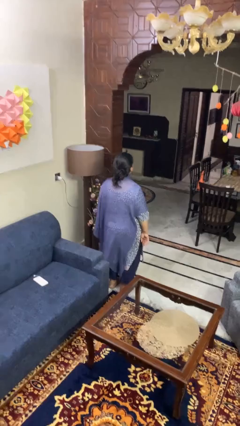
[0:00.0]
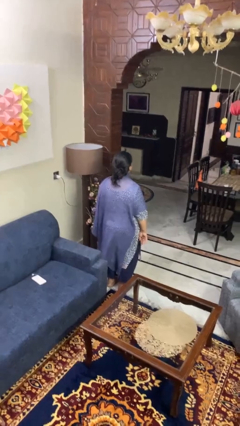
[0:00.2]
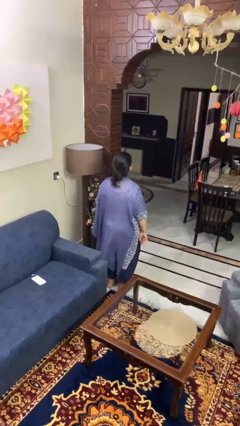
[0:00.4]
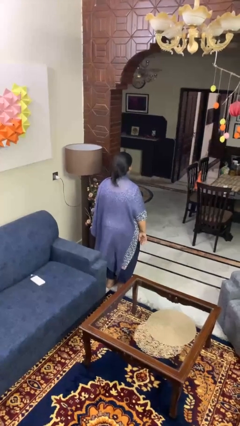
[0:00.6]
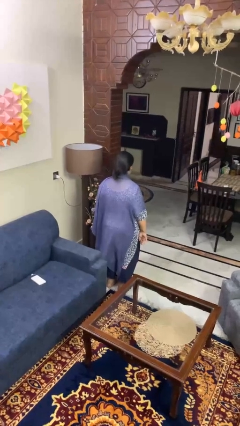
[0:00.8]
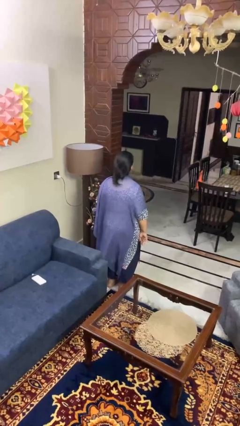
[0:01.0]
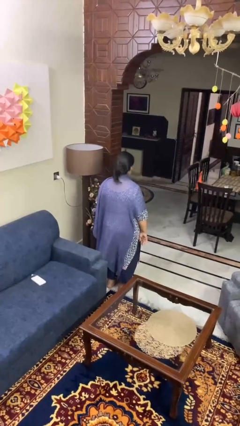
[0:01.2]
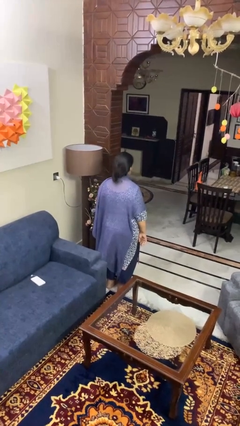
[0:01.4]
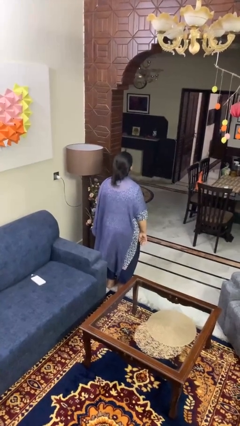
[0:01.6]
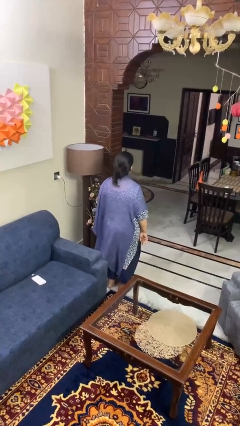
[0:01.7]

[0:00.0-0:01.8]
person nods head

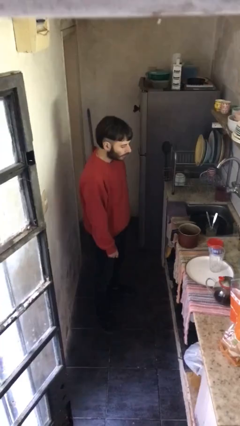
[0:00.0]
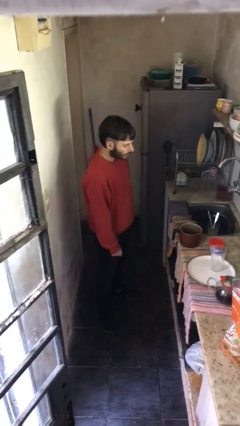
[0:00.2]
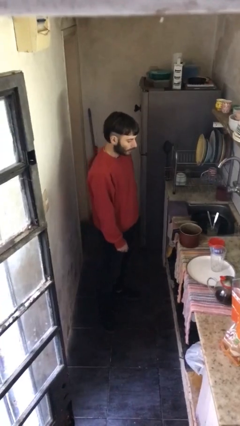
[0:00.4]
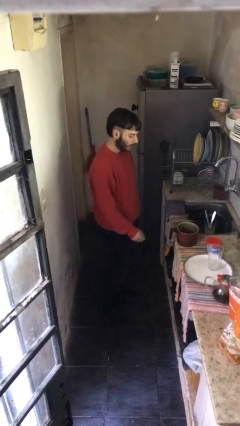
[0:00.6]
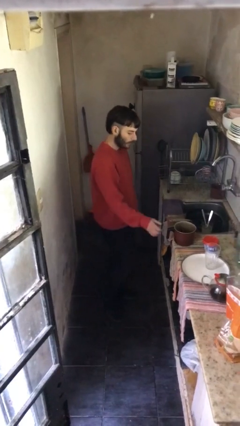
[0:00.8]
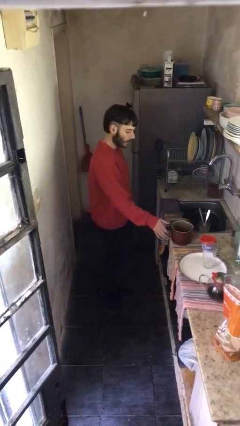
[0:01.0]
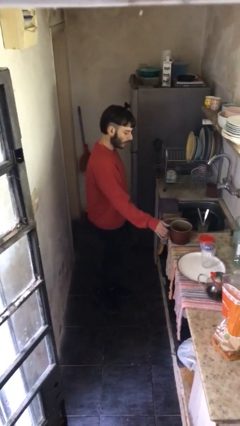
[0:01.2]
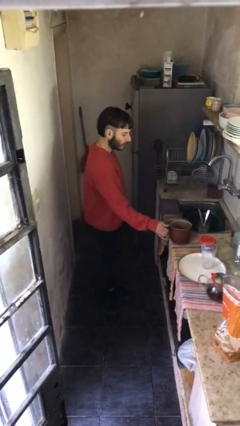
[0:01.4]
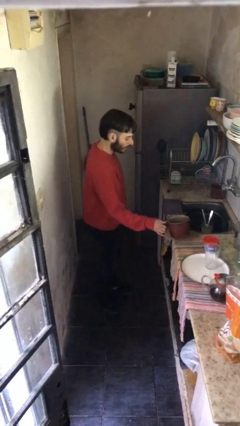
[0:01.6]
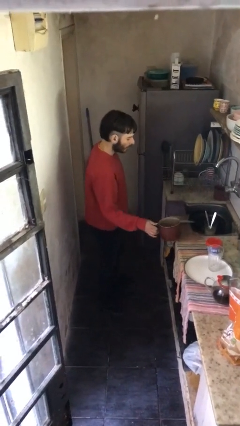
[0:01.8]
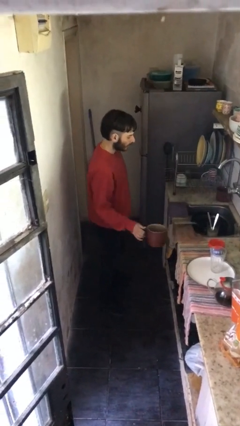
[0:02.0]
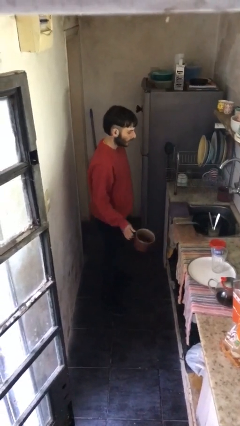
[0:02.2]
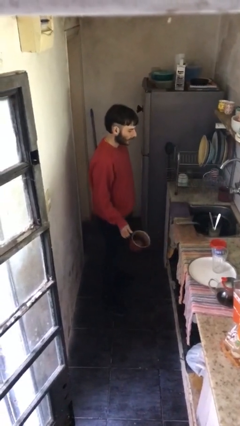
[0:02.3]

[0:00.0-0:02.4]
person picks up object from countertop

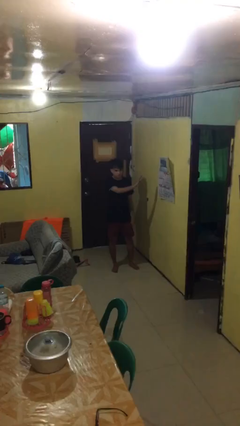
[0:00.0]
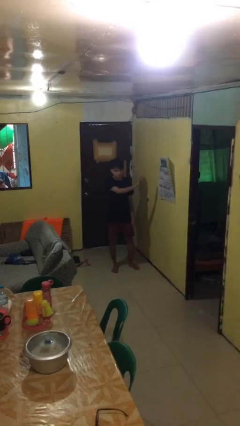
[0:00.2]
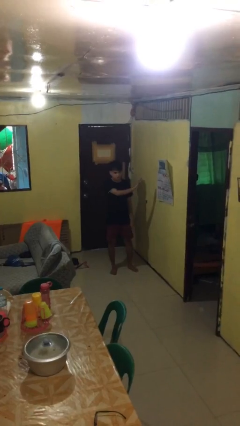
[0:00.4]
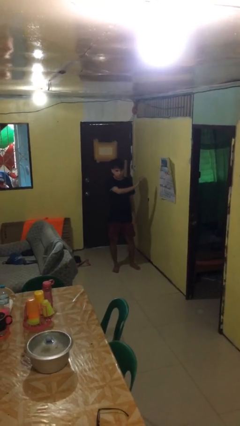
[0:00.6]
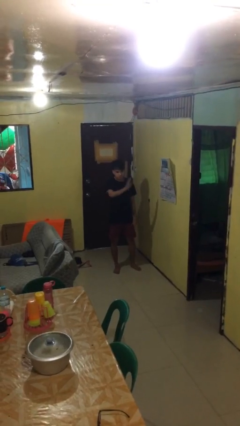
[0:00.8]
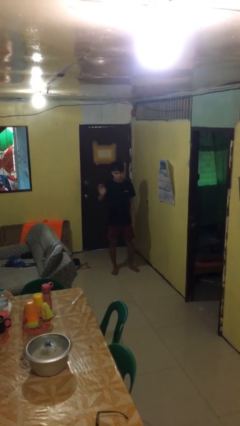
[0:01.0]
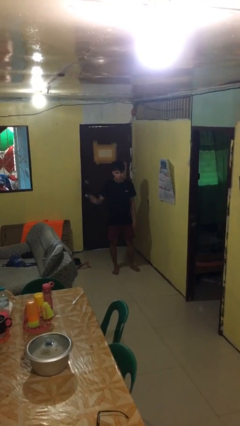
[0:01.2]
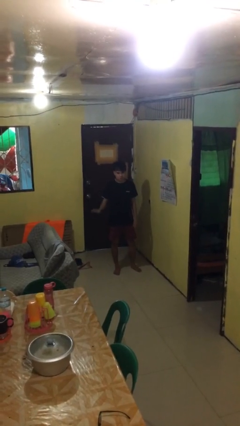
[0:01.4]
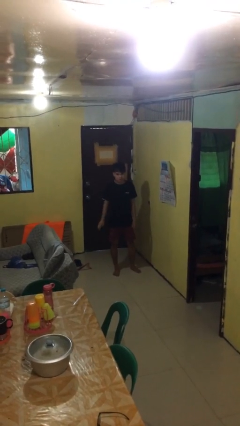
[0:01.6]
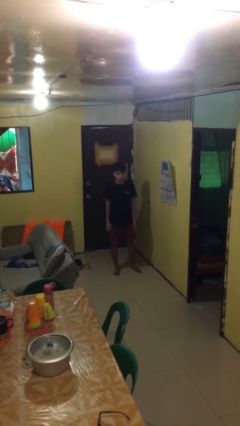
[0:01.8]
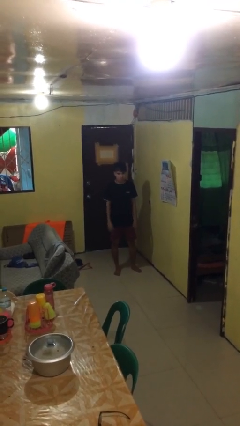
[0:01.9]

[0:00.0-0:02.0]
person gestures swipe right

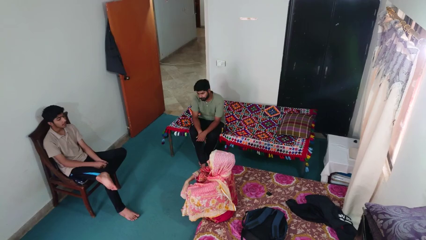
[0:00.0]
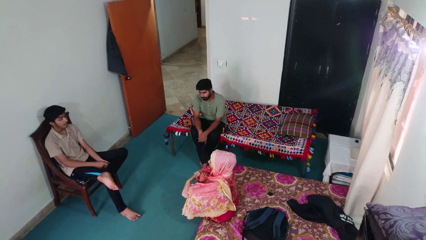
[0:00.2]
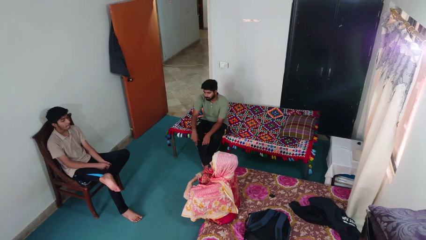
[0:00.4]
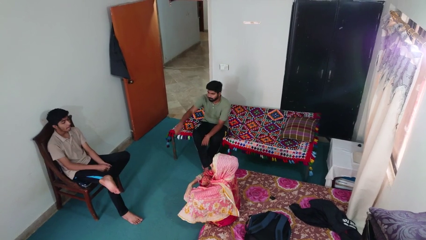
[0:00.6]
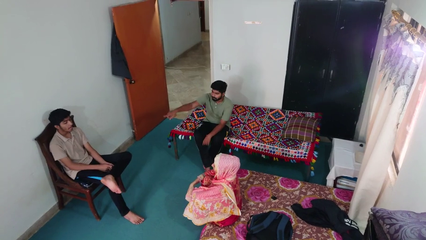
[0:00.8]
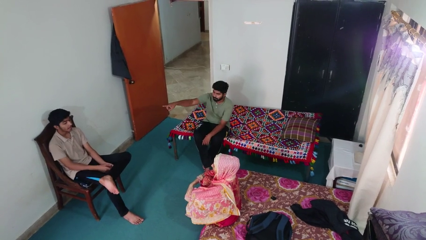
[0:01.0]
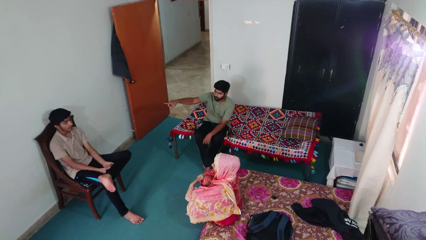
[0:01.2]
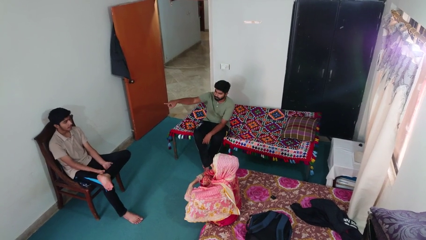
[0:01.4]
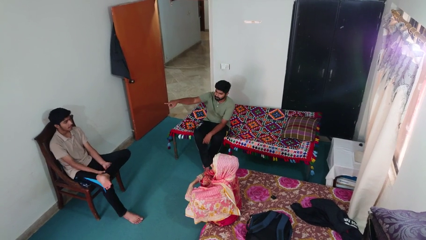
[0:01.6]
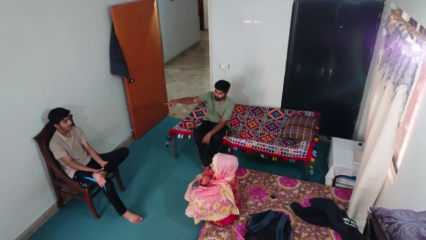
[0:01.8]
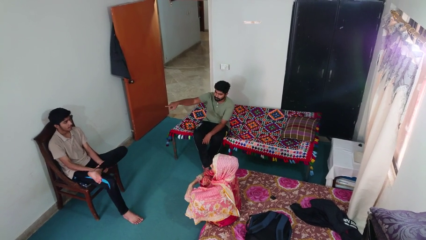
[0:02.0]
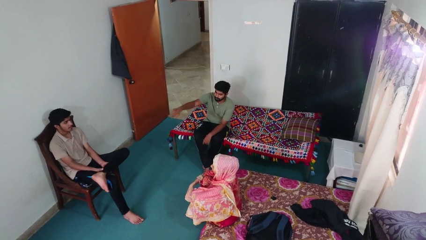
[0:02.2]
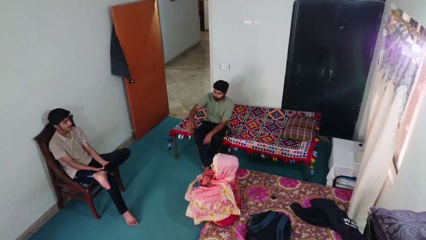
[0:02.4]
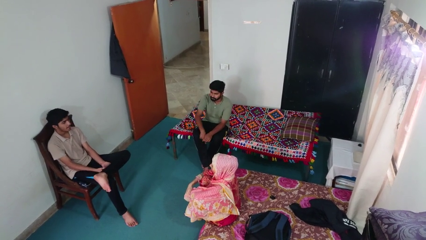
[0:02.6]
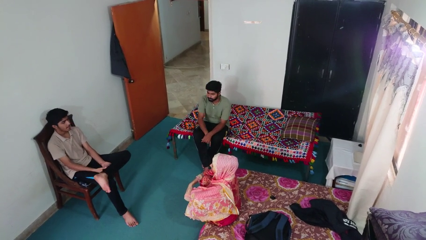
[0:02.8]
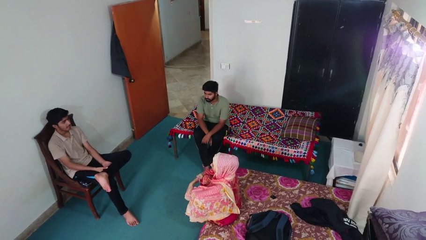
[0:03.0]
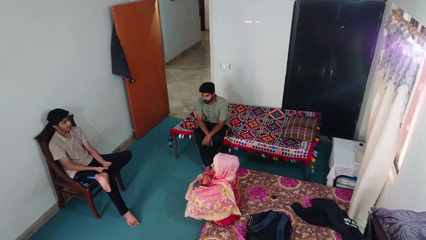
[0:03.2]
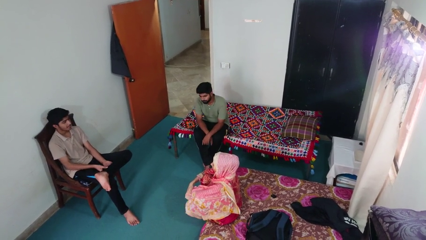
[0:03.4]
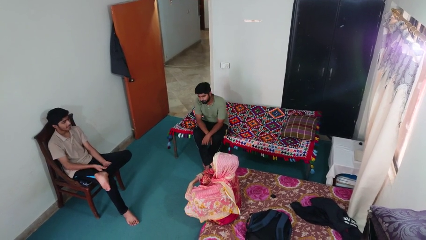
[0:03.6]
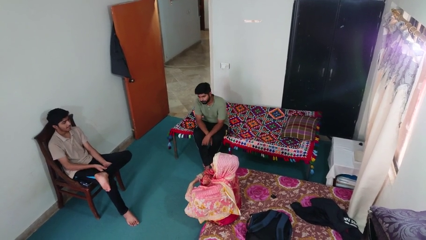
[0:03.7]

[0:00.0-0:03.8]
person points at person

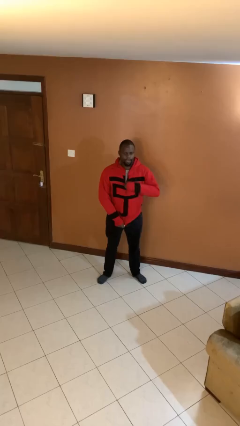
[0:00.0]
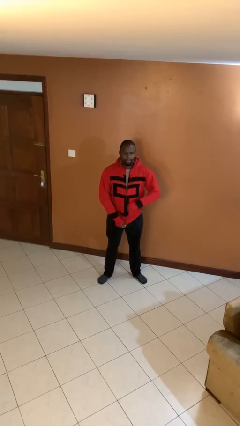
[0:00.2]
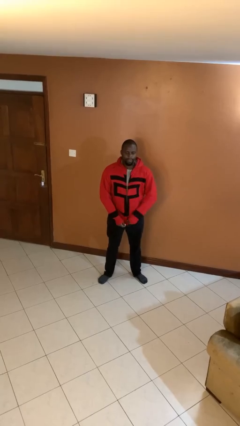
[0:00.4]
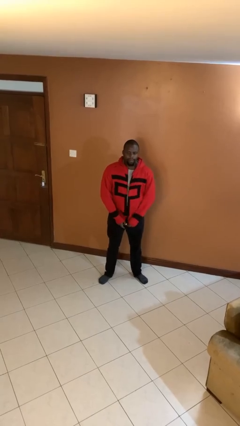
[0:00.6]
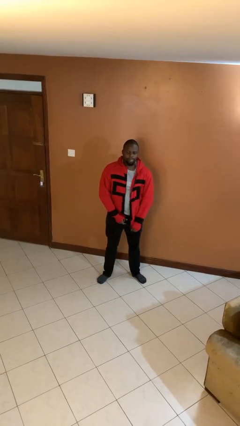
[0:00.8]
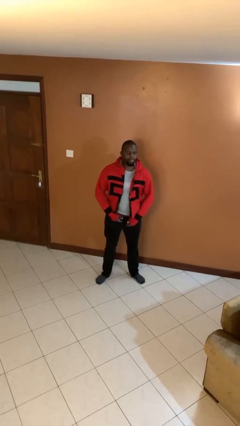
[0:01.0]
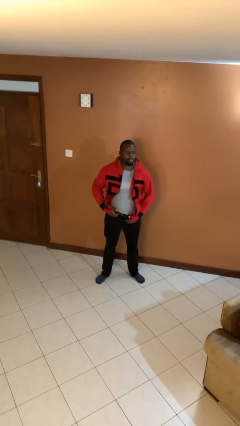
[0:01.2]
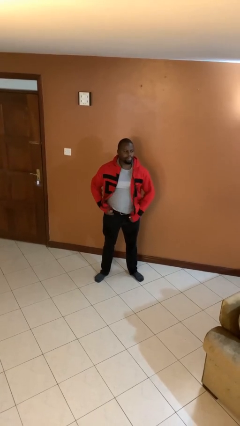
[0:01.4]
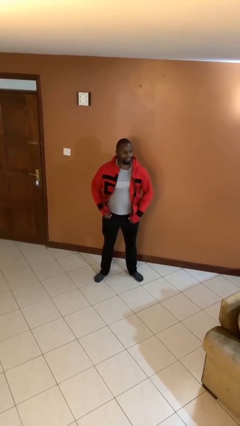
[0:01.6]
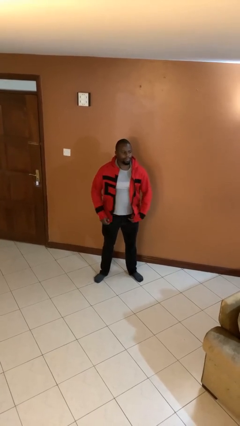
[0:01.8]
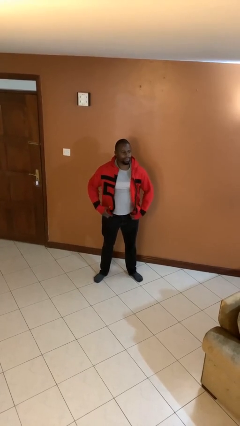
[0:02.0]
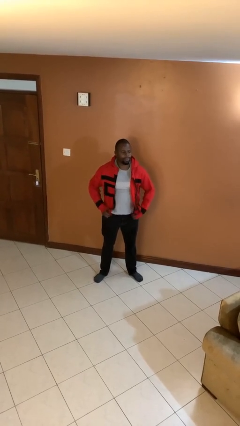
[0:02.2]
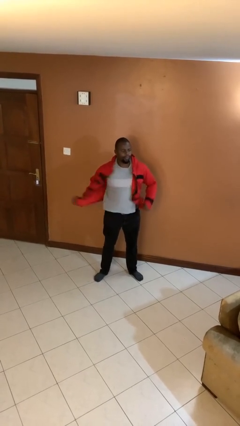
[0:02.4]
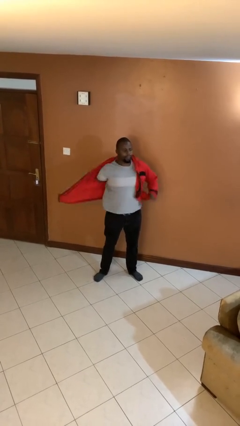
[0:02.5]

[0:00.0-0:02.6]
person unzips jacket

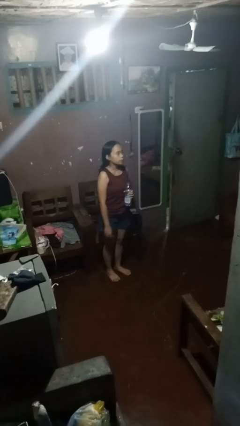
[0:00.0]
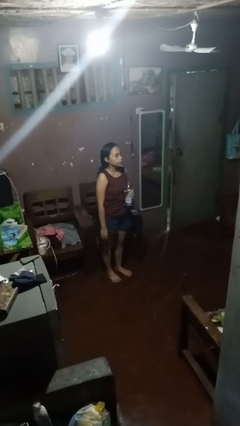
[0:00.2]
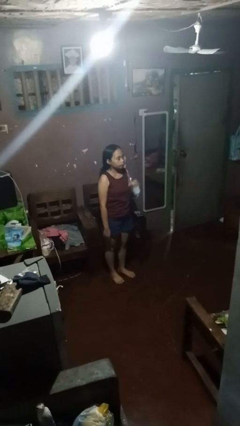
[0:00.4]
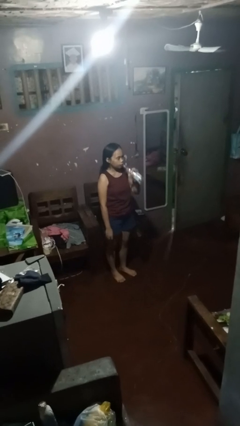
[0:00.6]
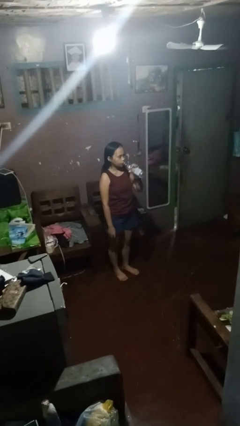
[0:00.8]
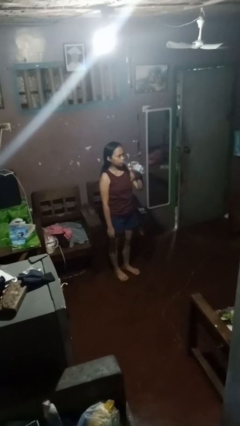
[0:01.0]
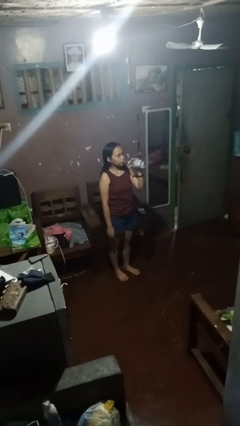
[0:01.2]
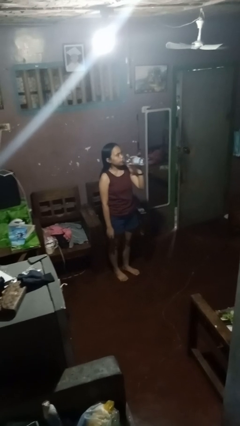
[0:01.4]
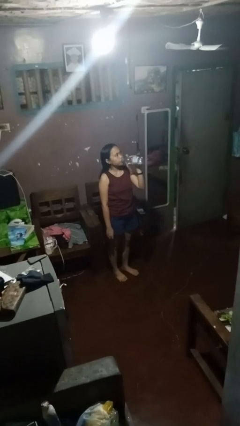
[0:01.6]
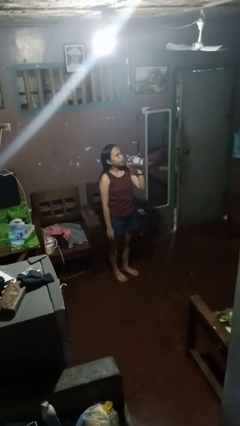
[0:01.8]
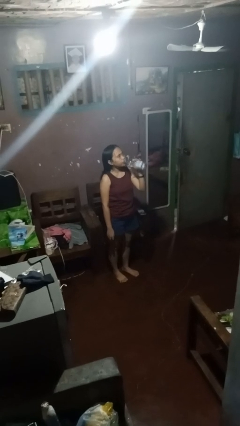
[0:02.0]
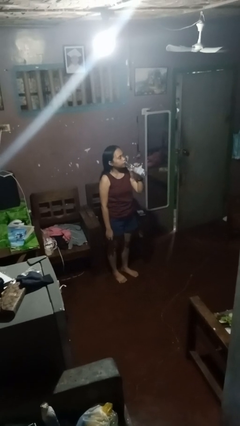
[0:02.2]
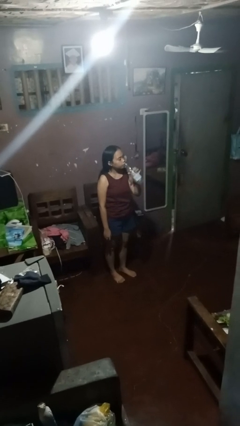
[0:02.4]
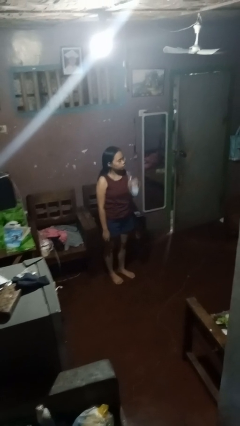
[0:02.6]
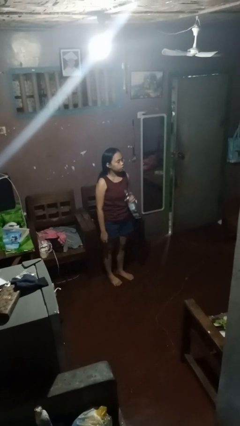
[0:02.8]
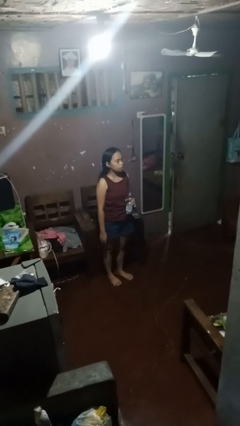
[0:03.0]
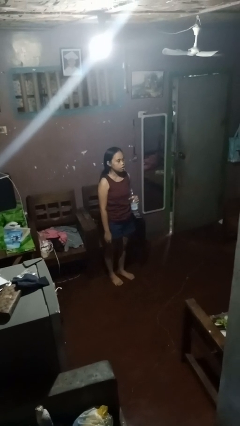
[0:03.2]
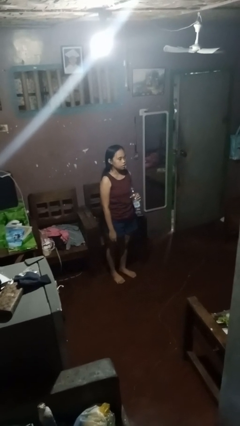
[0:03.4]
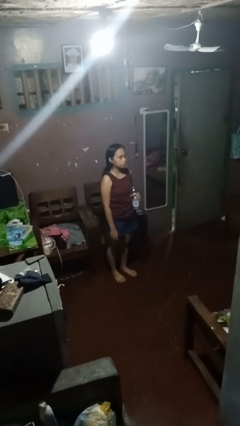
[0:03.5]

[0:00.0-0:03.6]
person drinks from bottle

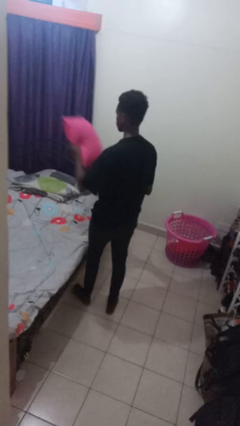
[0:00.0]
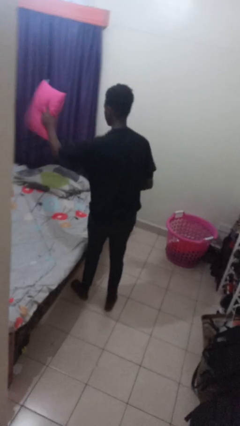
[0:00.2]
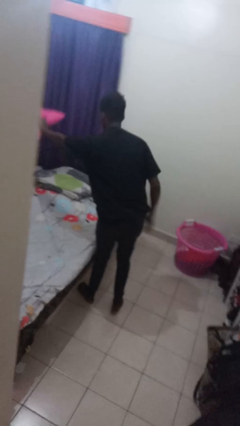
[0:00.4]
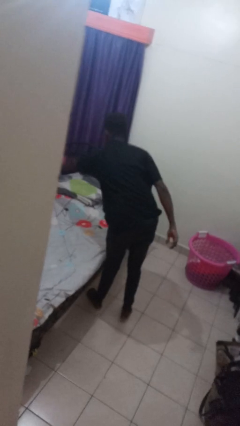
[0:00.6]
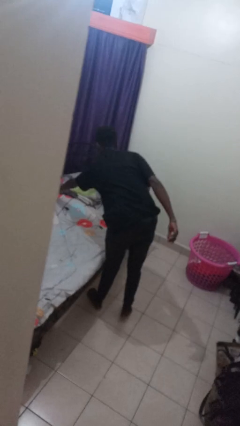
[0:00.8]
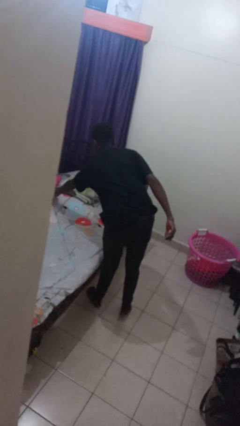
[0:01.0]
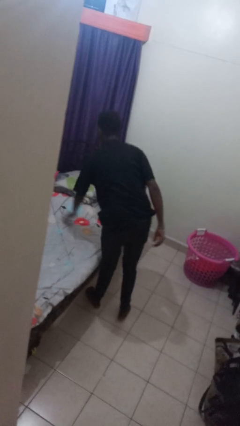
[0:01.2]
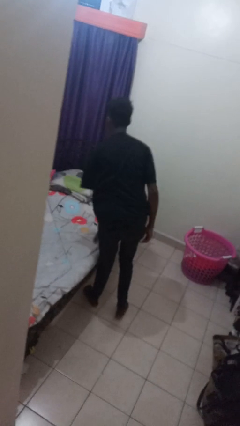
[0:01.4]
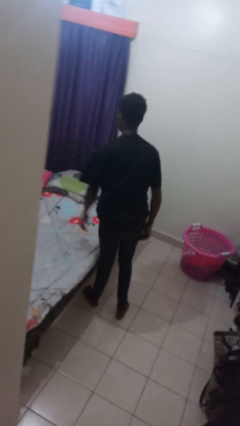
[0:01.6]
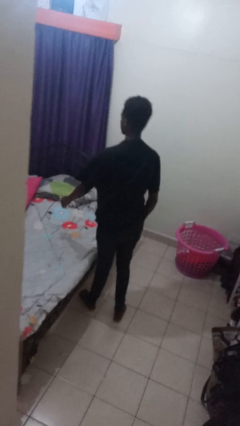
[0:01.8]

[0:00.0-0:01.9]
person puts down object on bed
